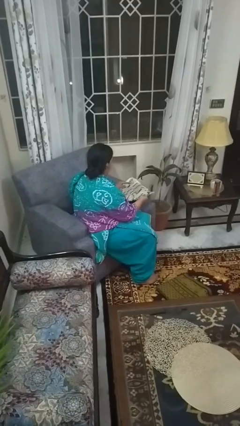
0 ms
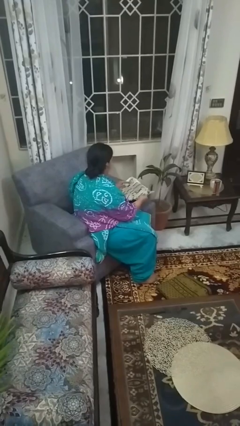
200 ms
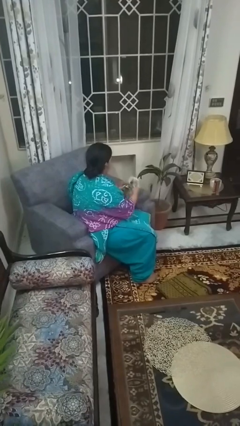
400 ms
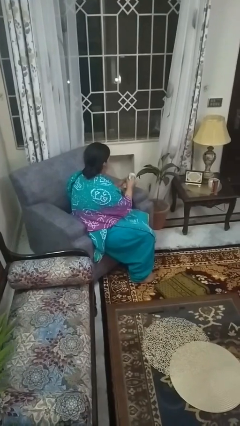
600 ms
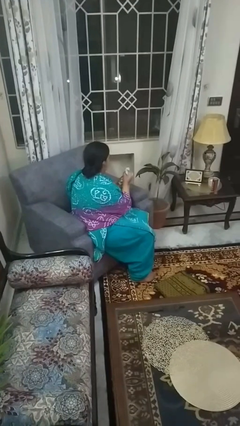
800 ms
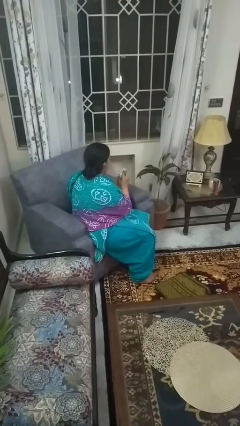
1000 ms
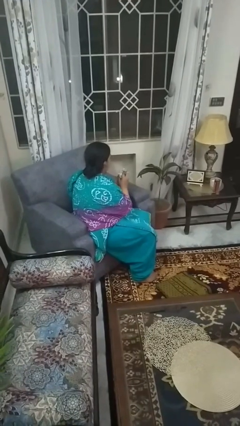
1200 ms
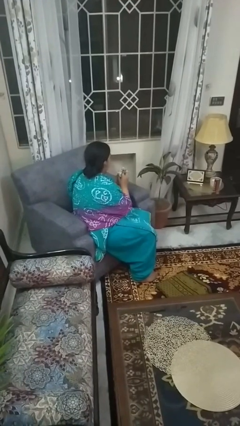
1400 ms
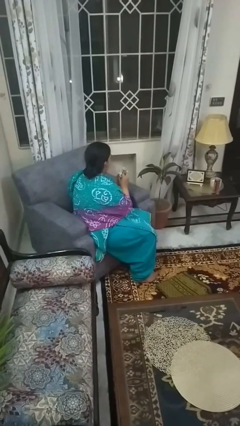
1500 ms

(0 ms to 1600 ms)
person crumples paper

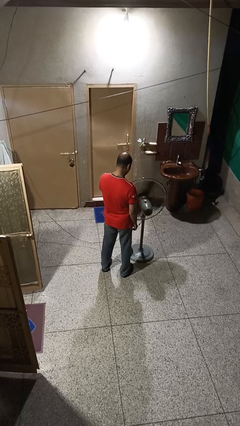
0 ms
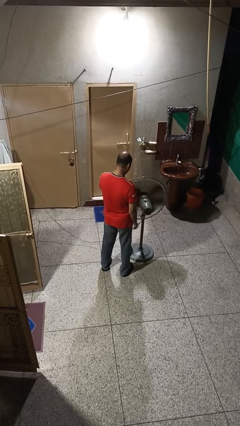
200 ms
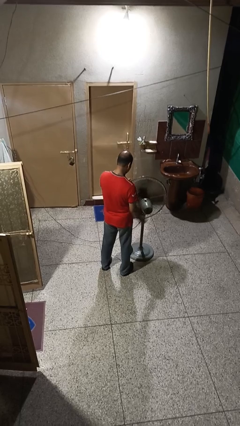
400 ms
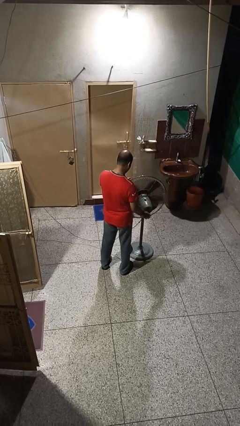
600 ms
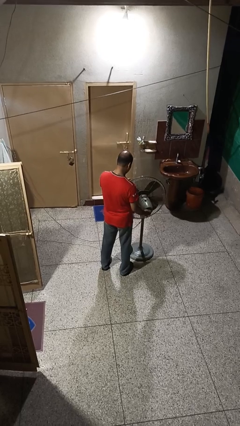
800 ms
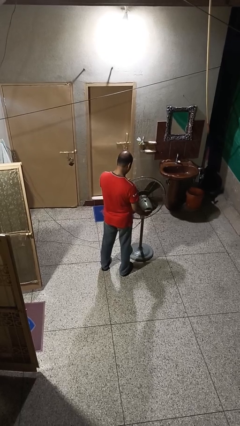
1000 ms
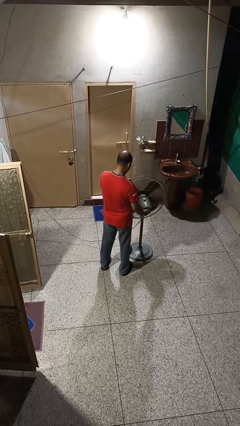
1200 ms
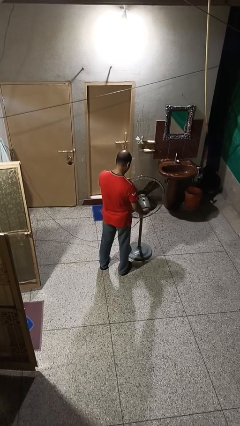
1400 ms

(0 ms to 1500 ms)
person turns off fan

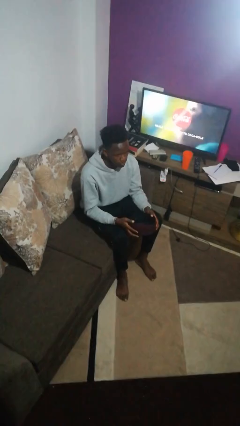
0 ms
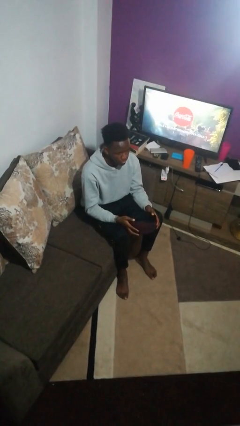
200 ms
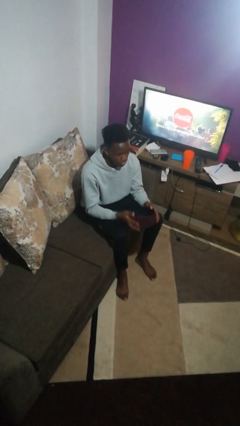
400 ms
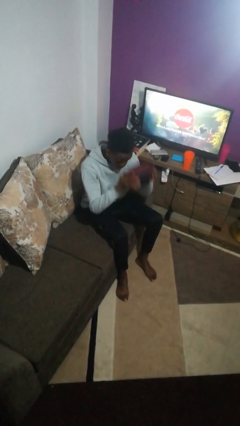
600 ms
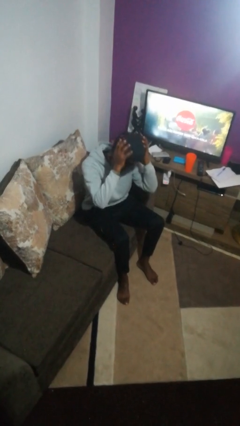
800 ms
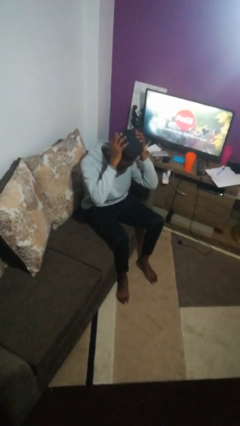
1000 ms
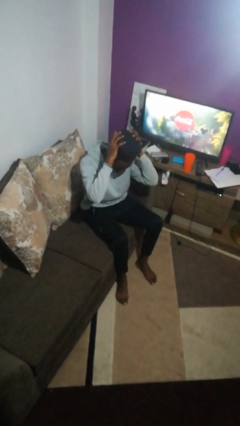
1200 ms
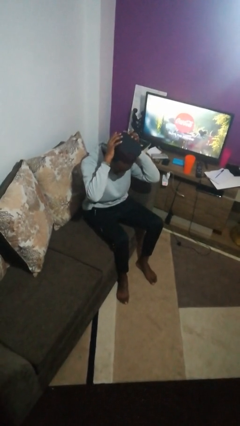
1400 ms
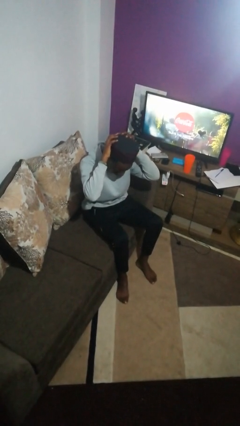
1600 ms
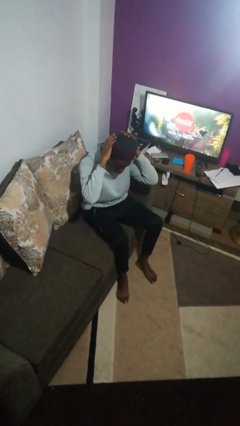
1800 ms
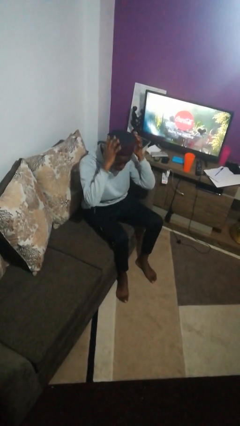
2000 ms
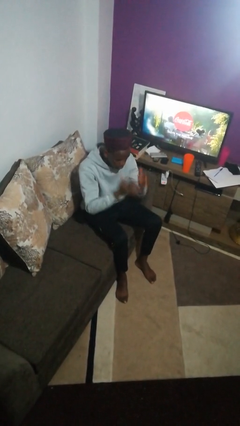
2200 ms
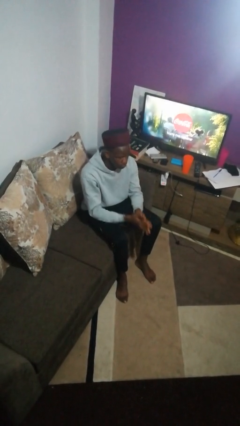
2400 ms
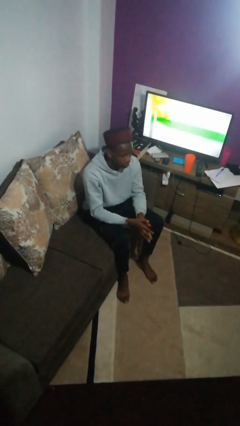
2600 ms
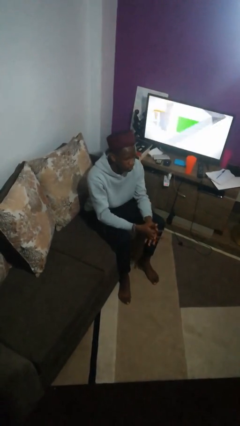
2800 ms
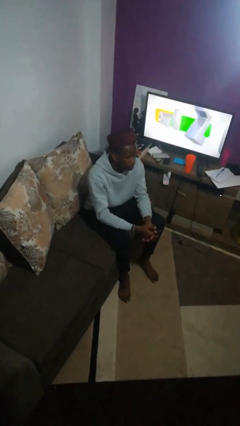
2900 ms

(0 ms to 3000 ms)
person puts on hat

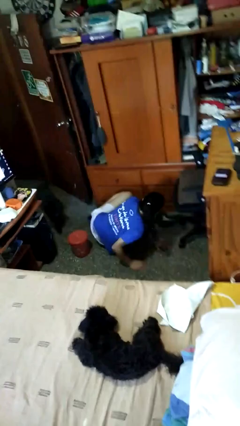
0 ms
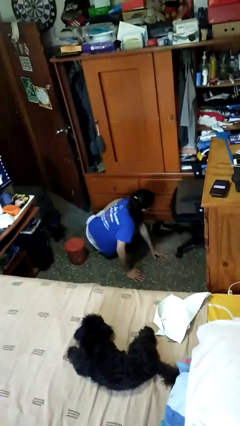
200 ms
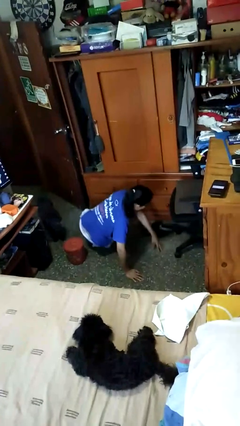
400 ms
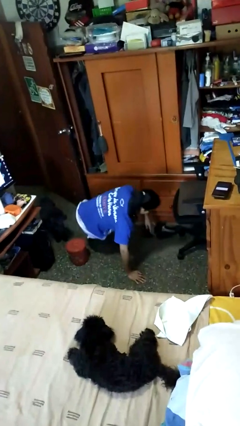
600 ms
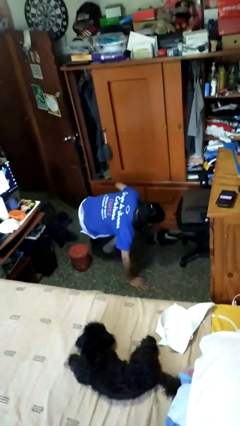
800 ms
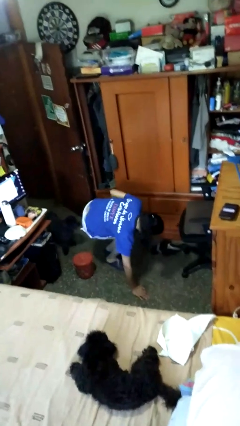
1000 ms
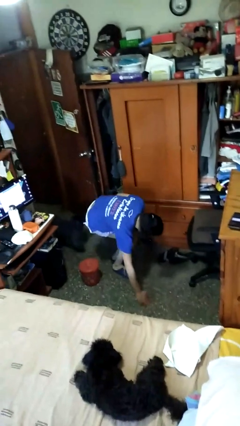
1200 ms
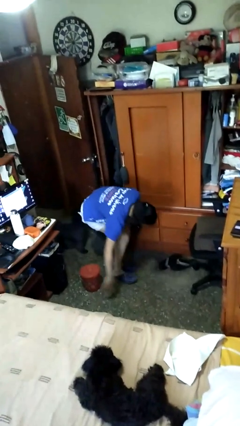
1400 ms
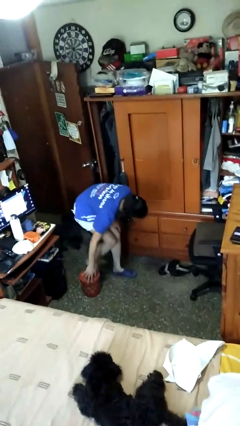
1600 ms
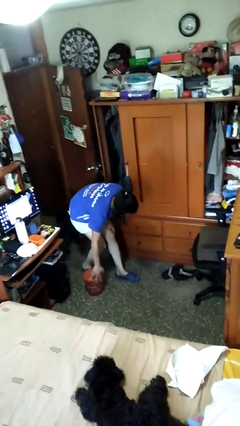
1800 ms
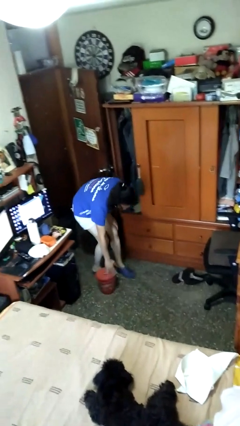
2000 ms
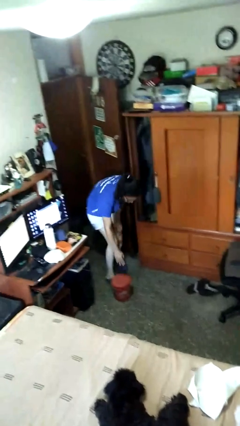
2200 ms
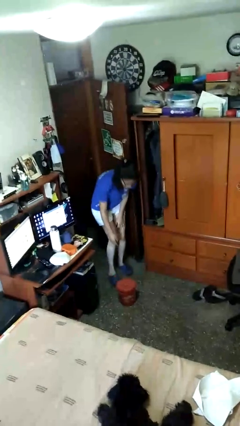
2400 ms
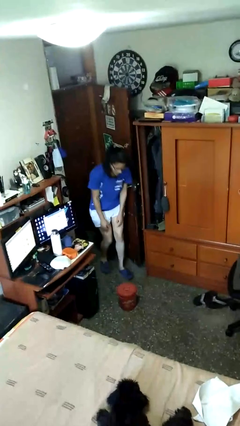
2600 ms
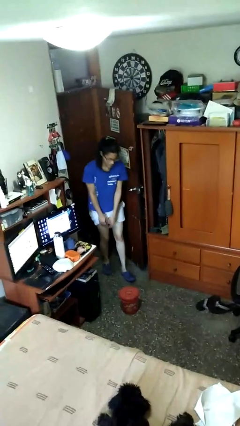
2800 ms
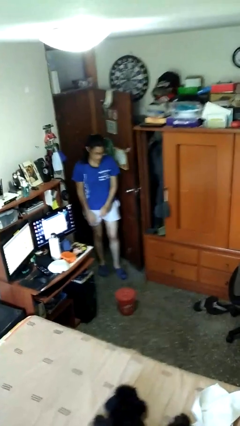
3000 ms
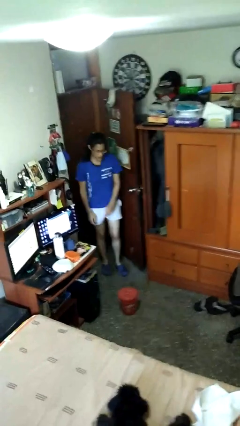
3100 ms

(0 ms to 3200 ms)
person stands up from floor

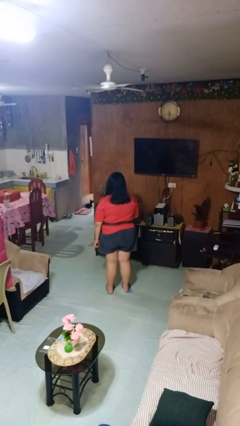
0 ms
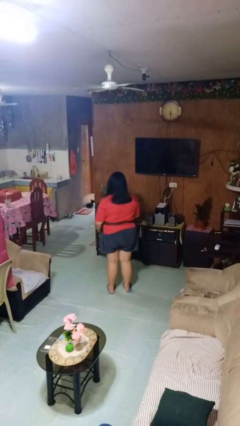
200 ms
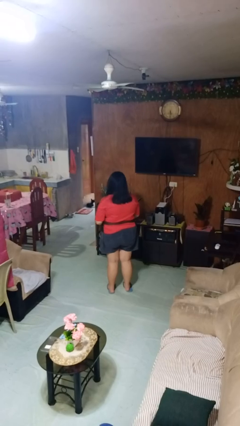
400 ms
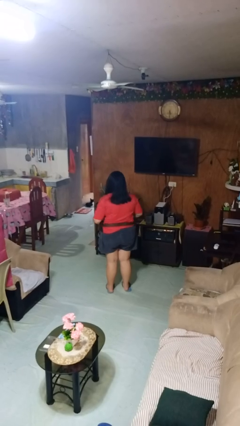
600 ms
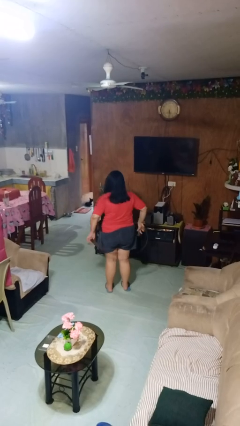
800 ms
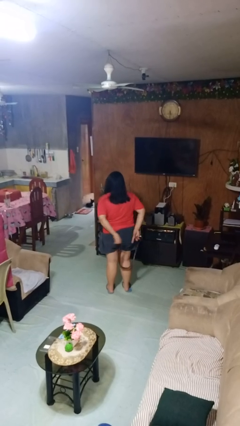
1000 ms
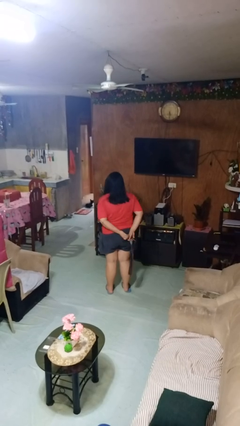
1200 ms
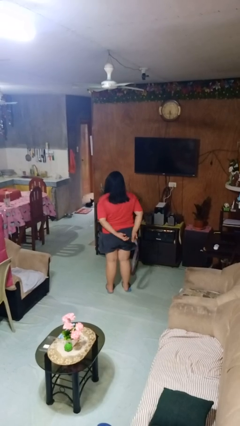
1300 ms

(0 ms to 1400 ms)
person takes off belt

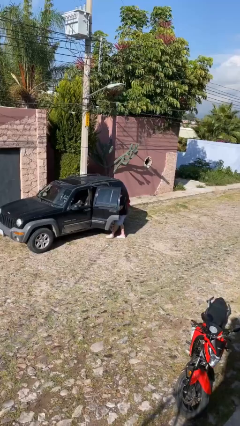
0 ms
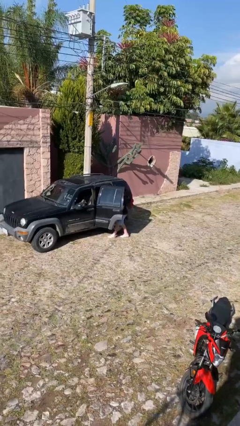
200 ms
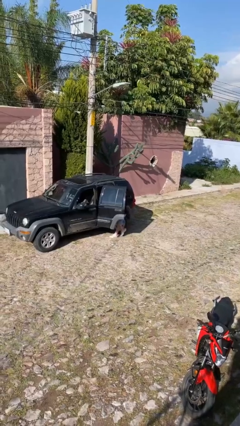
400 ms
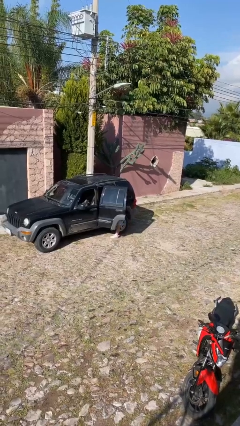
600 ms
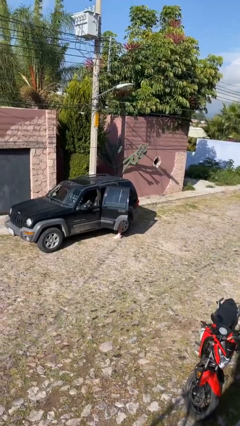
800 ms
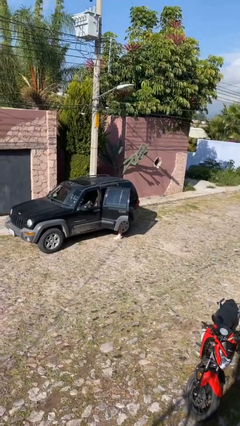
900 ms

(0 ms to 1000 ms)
person enters car

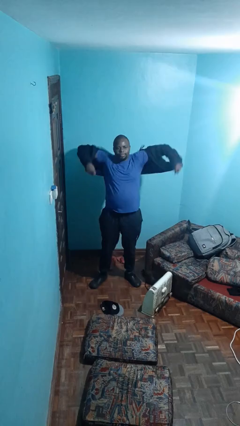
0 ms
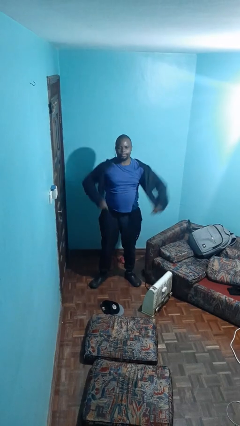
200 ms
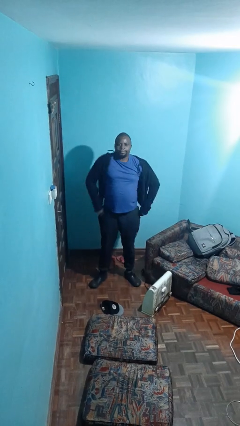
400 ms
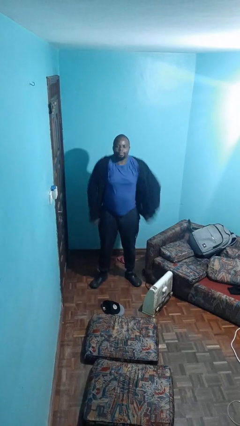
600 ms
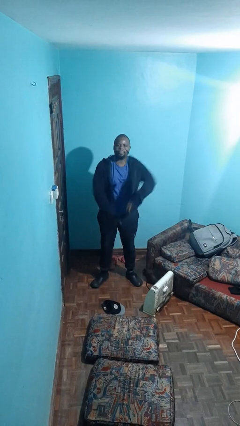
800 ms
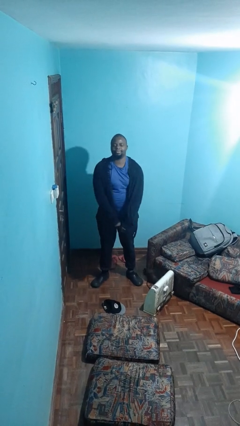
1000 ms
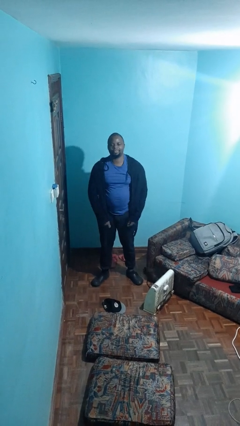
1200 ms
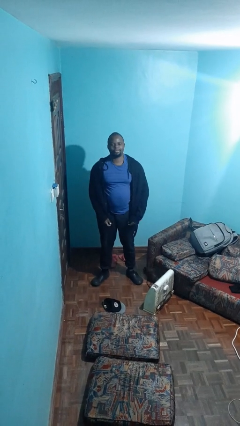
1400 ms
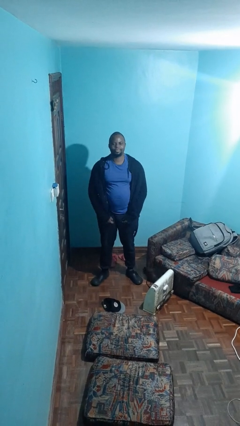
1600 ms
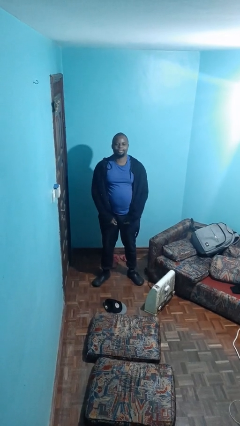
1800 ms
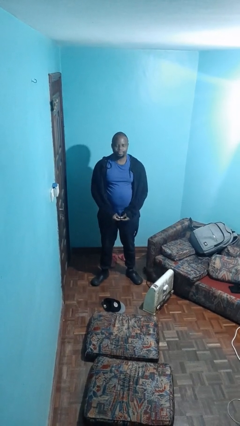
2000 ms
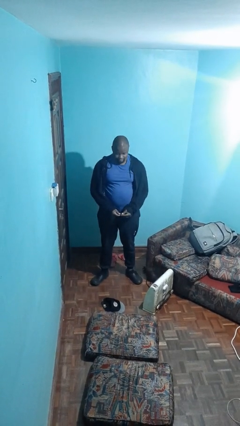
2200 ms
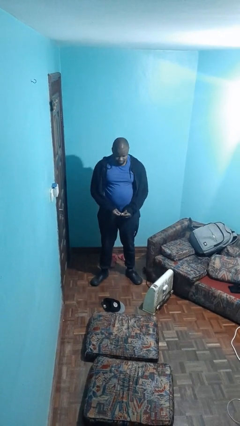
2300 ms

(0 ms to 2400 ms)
person puts on jacket

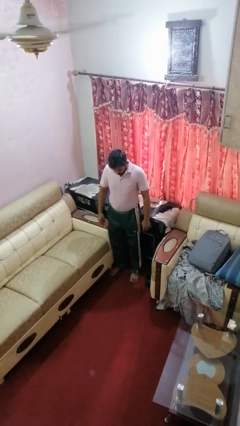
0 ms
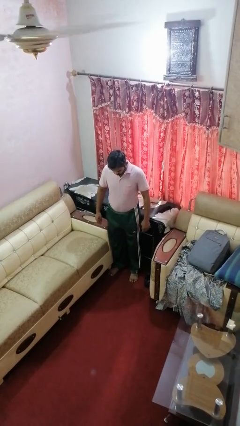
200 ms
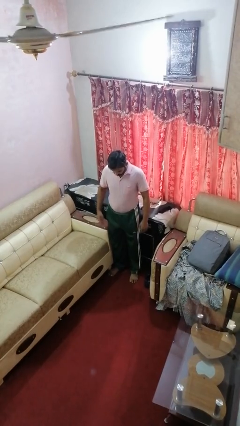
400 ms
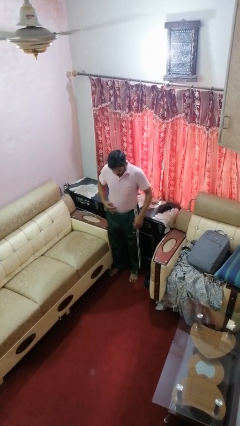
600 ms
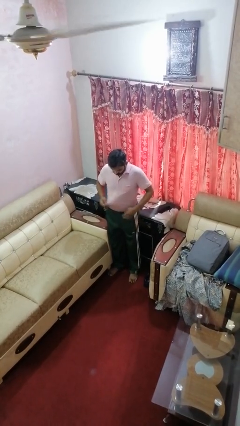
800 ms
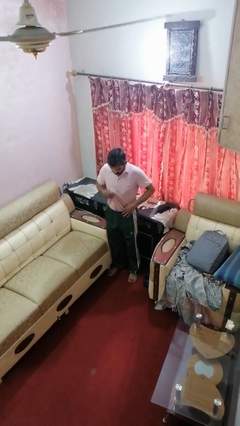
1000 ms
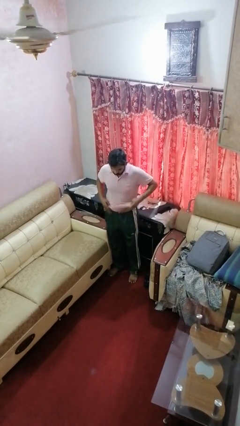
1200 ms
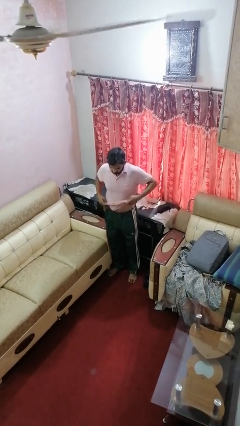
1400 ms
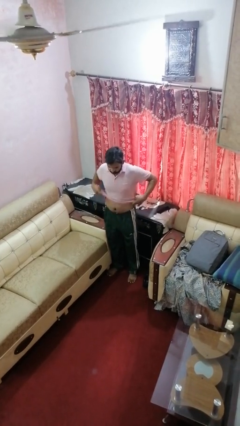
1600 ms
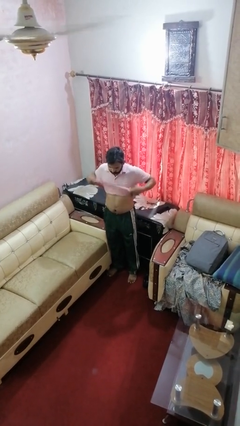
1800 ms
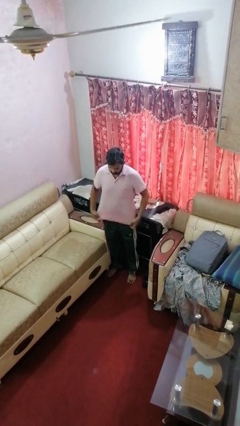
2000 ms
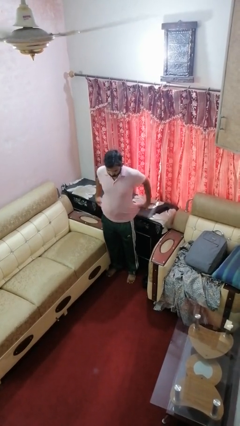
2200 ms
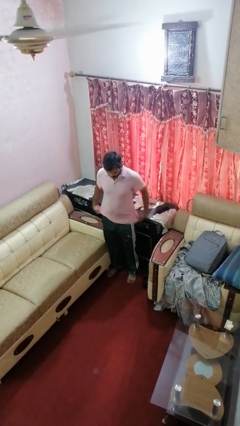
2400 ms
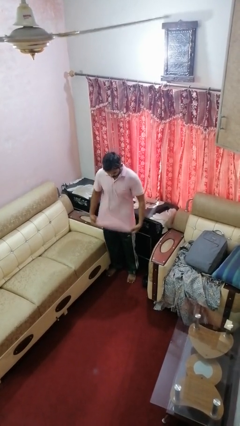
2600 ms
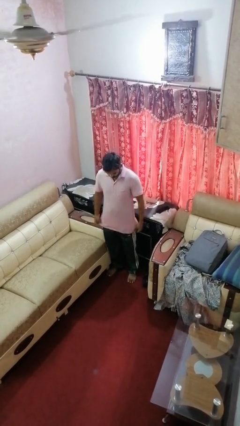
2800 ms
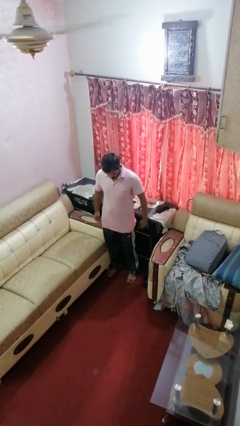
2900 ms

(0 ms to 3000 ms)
person untucks shirt

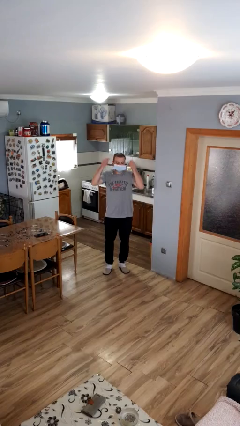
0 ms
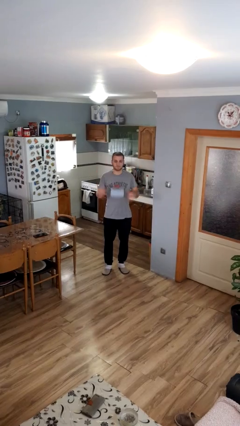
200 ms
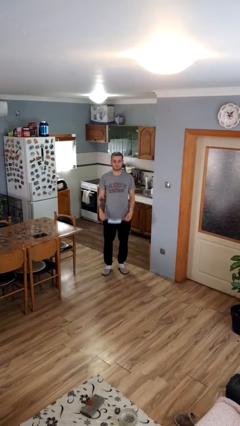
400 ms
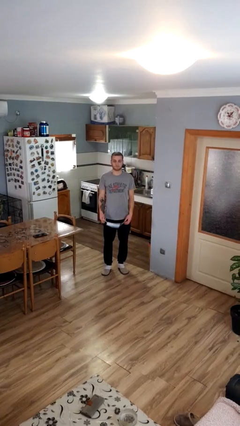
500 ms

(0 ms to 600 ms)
person takes off facemask
